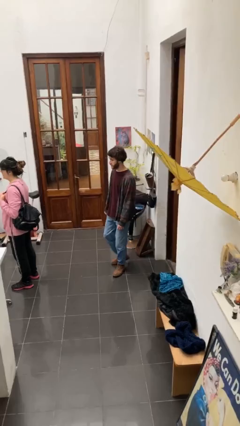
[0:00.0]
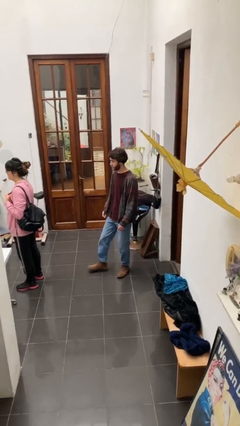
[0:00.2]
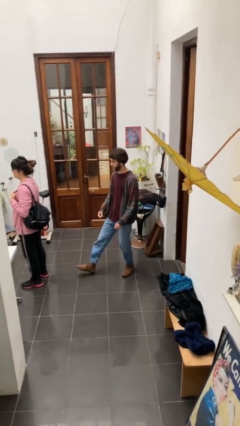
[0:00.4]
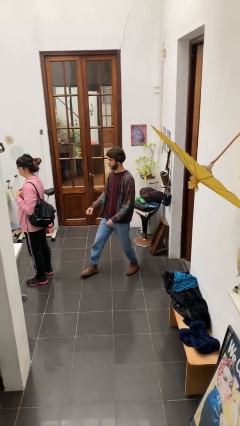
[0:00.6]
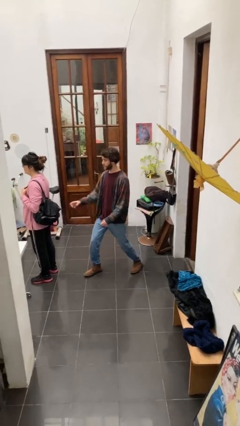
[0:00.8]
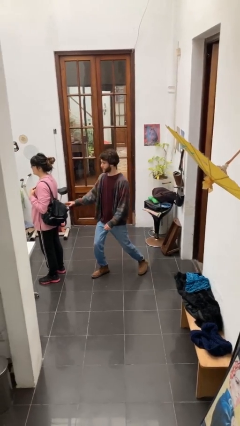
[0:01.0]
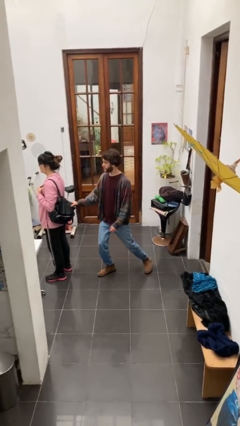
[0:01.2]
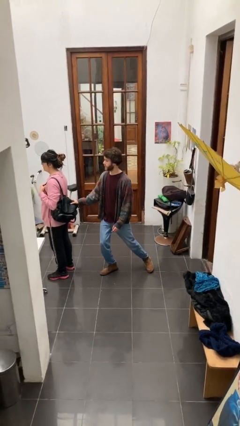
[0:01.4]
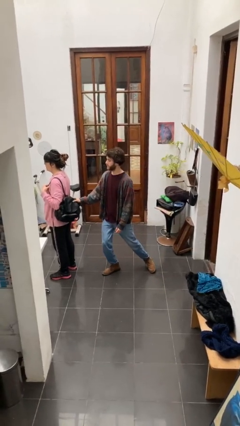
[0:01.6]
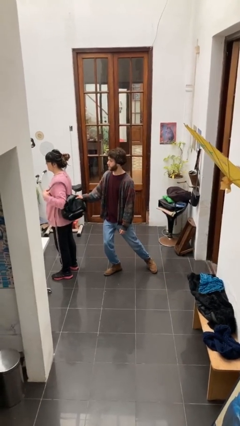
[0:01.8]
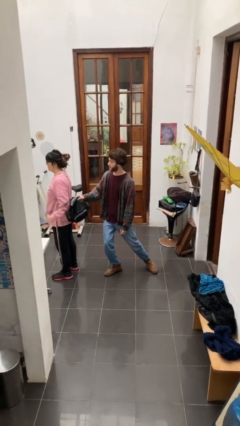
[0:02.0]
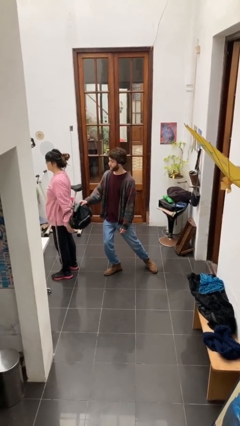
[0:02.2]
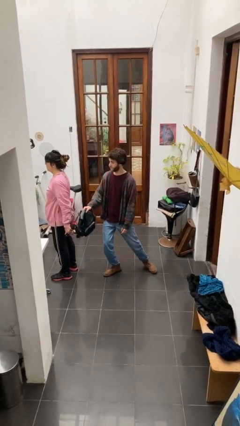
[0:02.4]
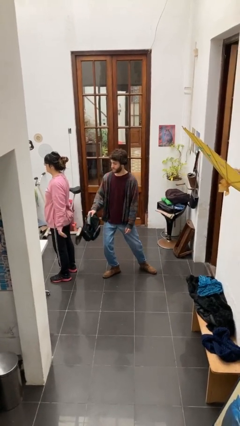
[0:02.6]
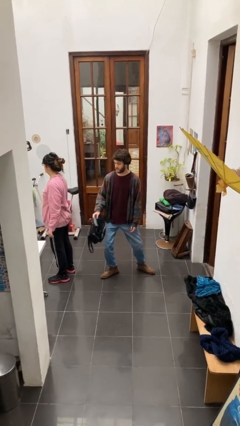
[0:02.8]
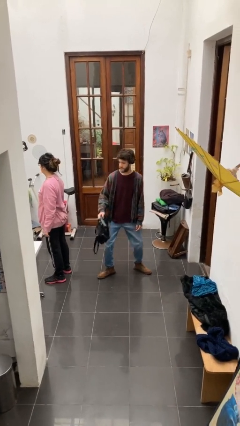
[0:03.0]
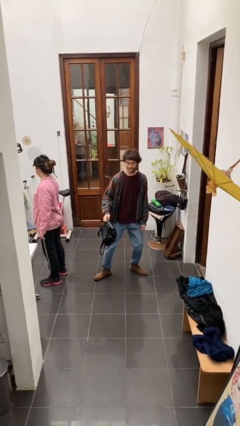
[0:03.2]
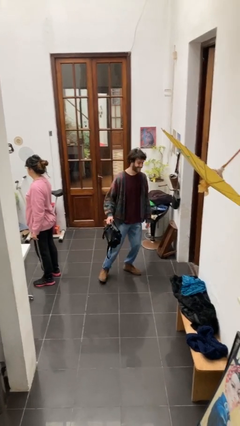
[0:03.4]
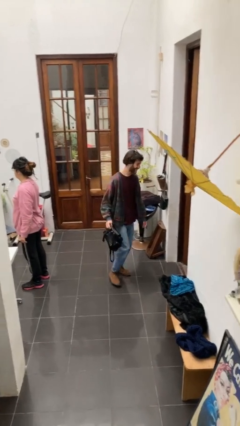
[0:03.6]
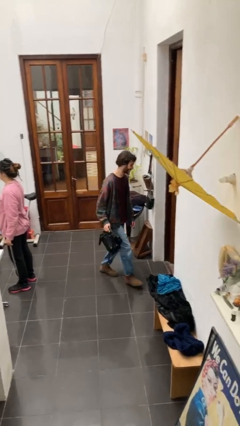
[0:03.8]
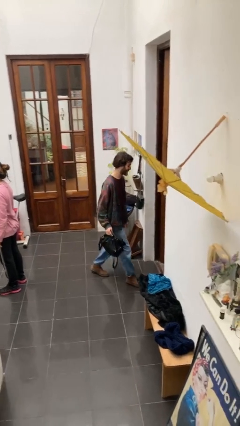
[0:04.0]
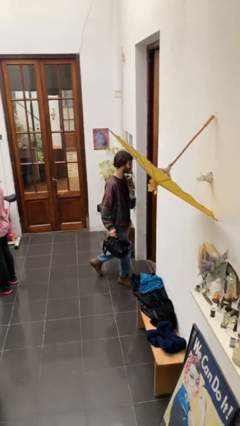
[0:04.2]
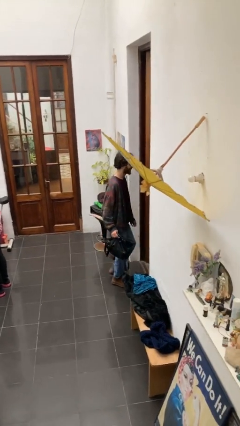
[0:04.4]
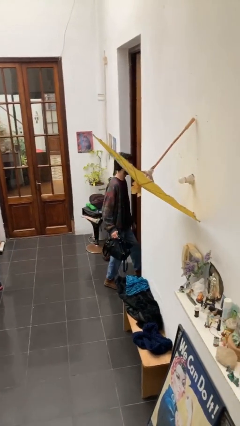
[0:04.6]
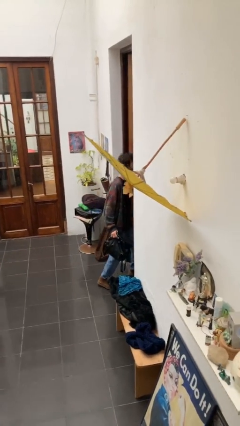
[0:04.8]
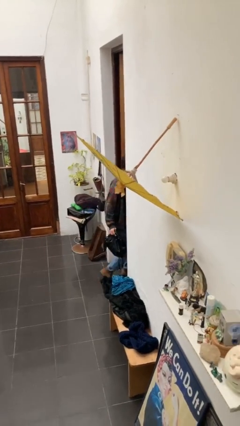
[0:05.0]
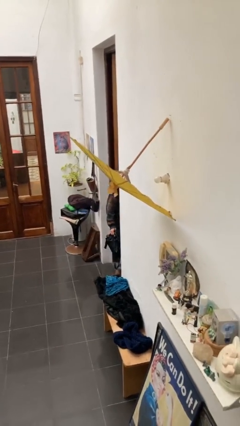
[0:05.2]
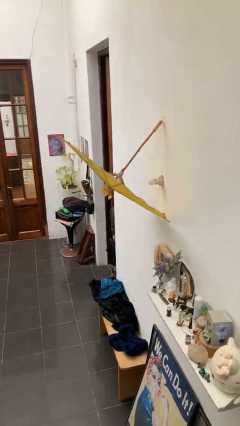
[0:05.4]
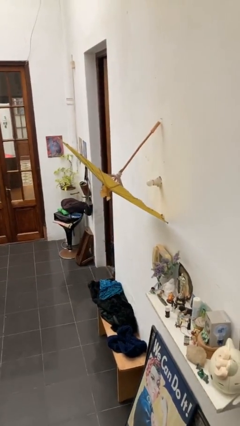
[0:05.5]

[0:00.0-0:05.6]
person steals object from person

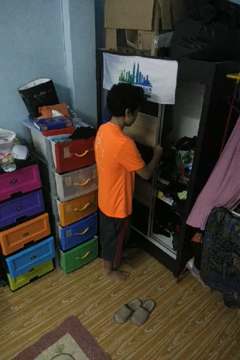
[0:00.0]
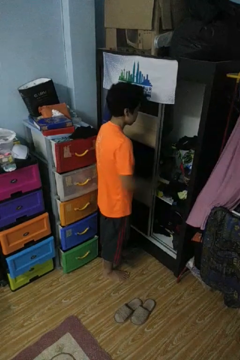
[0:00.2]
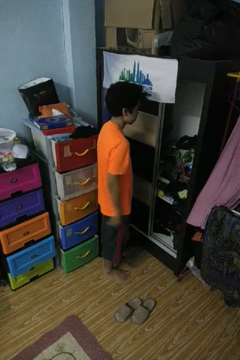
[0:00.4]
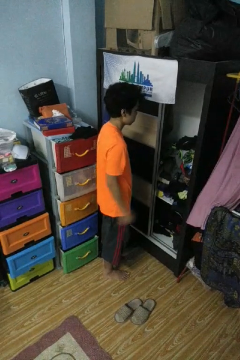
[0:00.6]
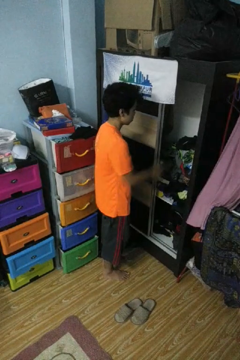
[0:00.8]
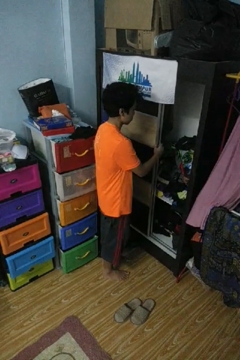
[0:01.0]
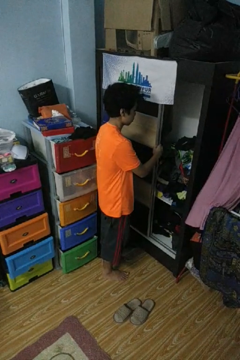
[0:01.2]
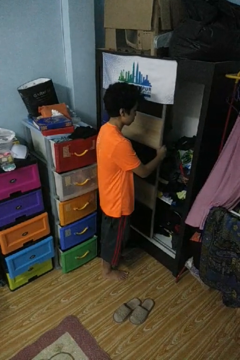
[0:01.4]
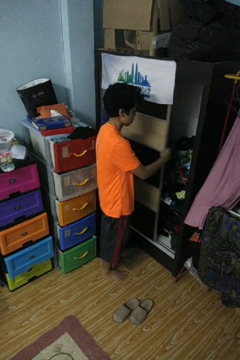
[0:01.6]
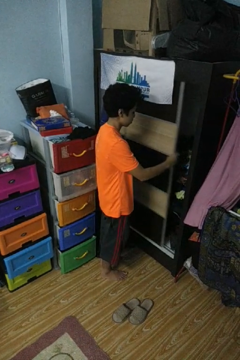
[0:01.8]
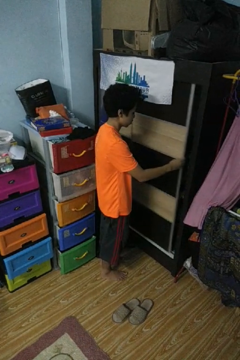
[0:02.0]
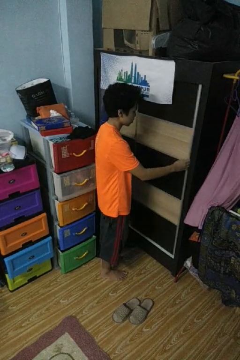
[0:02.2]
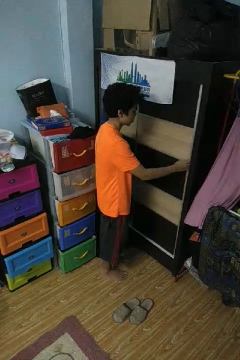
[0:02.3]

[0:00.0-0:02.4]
person closes closet door

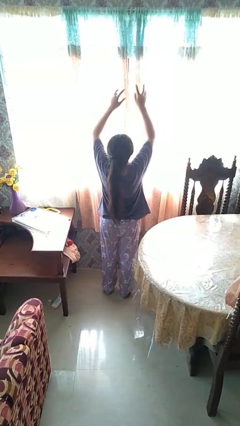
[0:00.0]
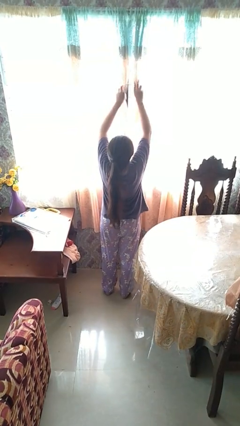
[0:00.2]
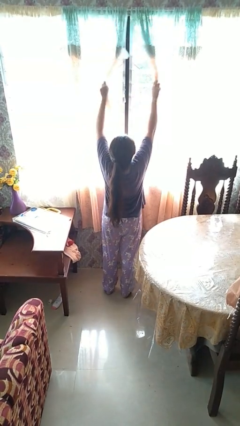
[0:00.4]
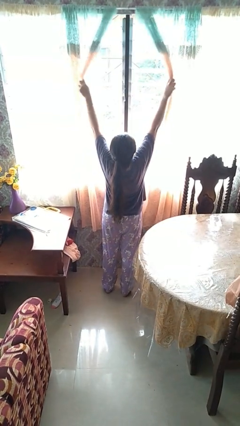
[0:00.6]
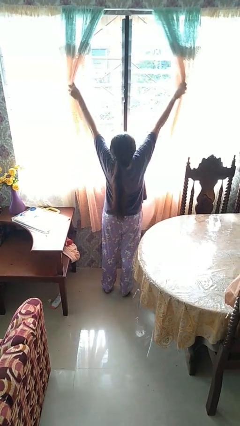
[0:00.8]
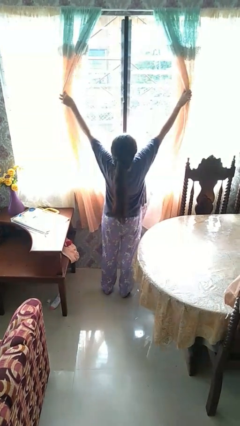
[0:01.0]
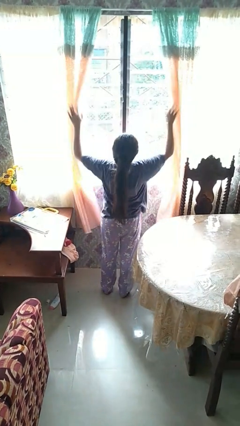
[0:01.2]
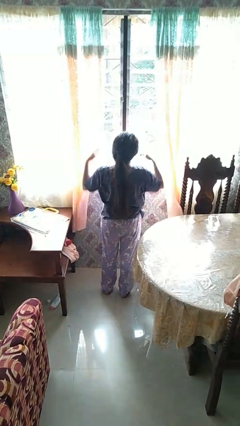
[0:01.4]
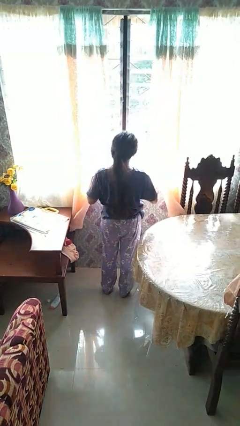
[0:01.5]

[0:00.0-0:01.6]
person opens curtains

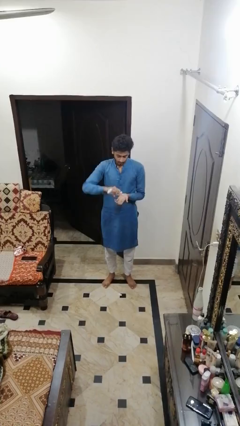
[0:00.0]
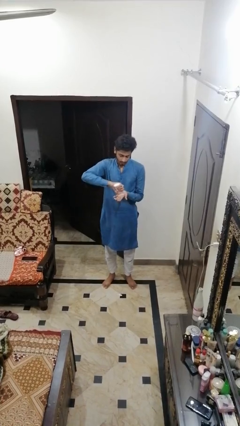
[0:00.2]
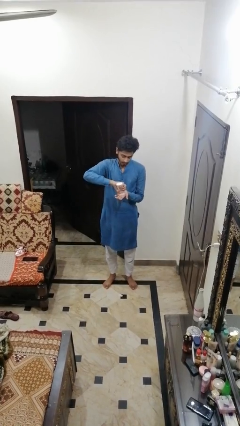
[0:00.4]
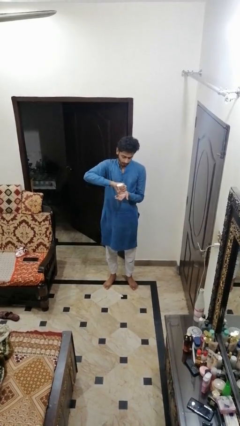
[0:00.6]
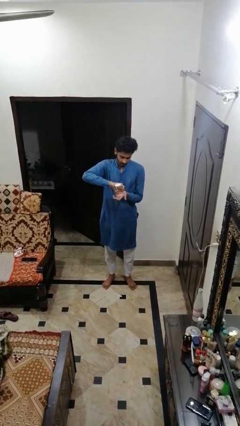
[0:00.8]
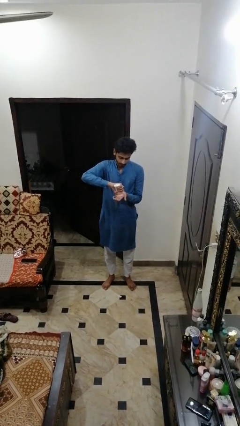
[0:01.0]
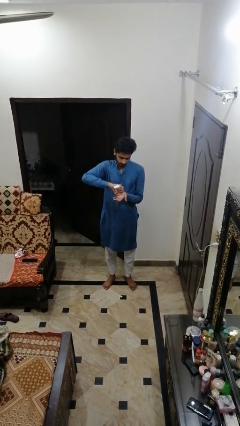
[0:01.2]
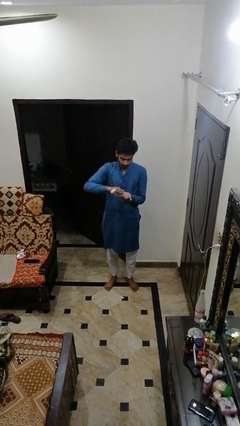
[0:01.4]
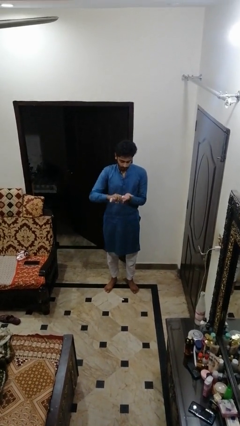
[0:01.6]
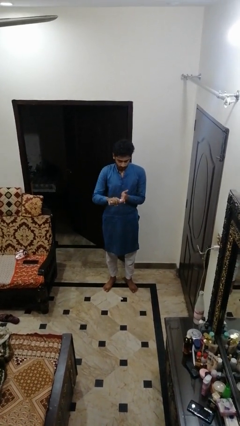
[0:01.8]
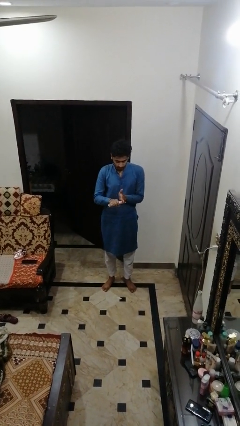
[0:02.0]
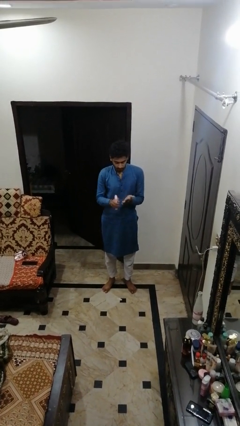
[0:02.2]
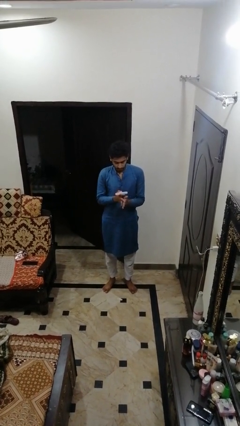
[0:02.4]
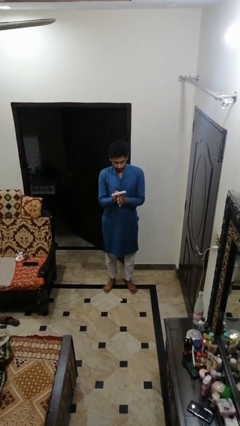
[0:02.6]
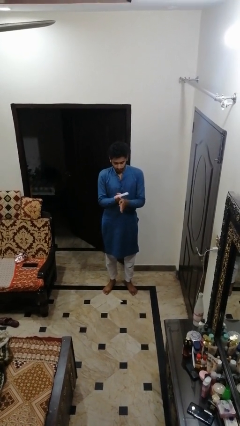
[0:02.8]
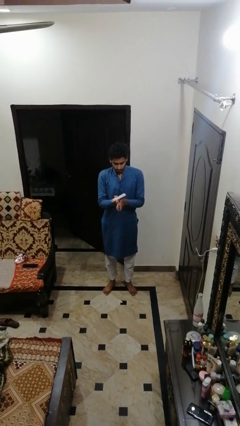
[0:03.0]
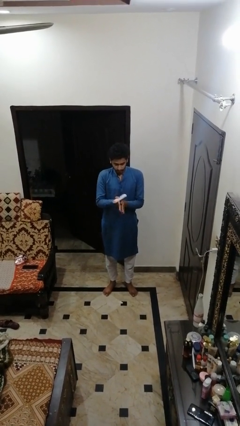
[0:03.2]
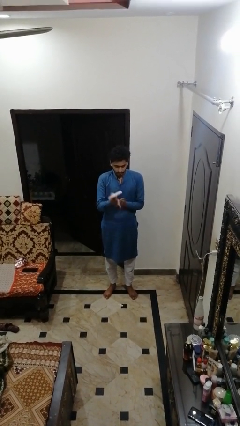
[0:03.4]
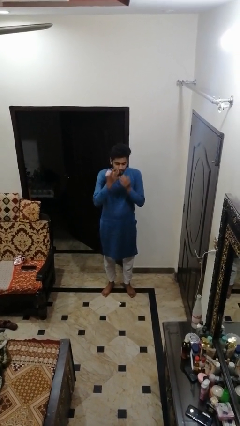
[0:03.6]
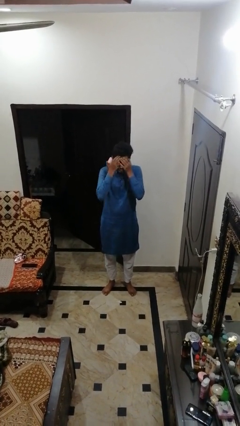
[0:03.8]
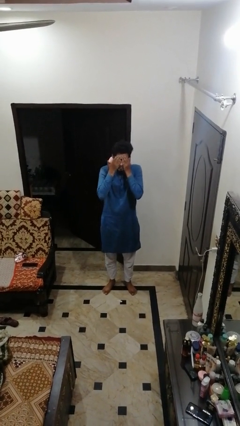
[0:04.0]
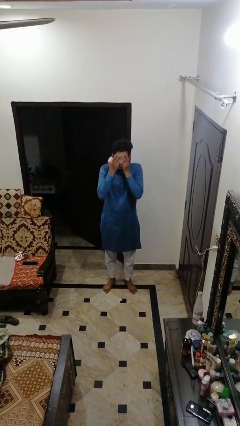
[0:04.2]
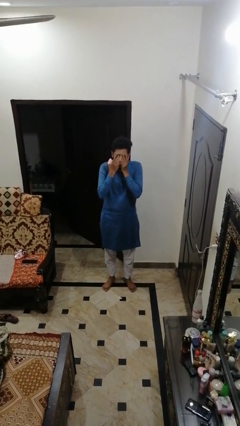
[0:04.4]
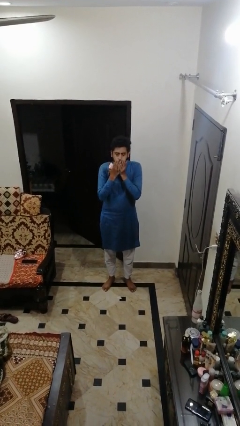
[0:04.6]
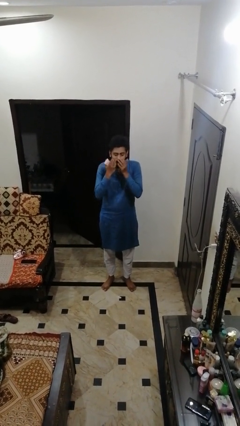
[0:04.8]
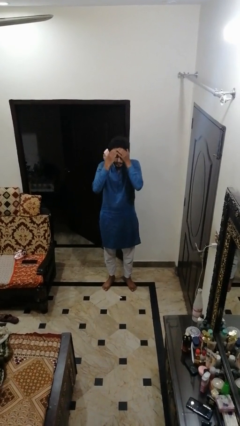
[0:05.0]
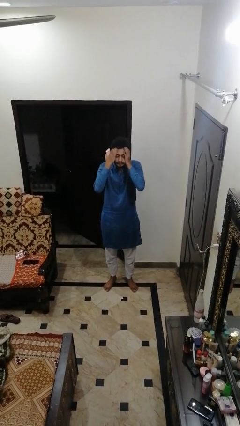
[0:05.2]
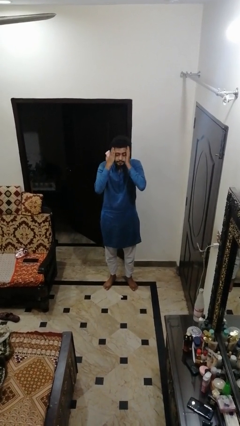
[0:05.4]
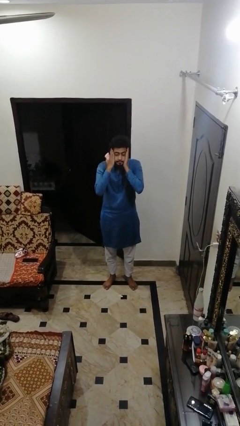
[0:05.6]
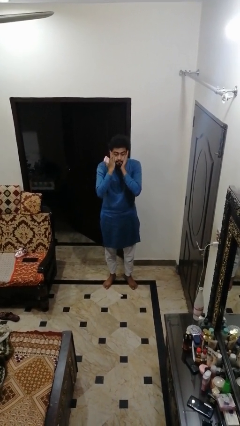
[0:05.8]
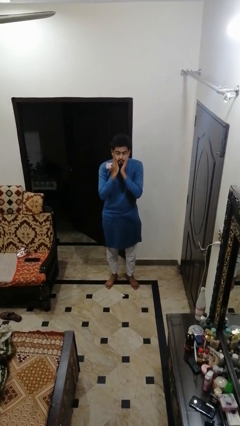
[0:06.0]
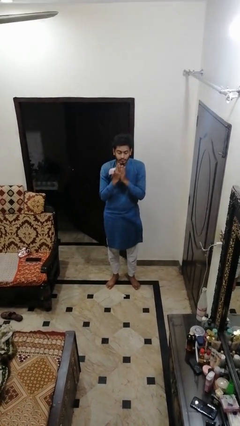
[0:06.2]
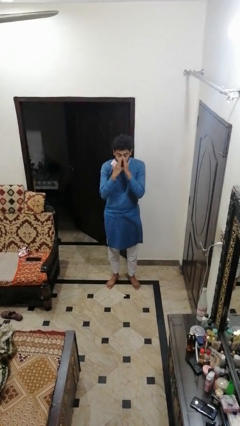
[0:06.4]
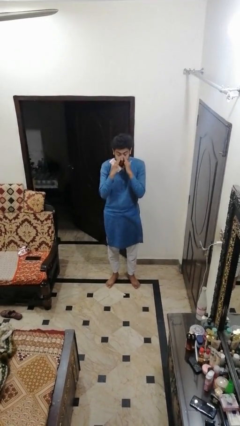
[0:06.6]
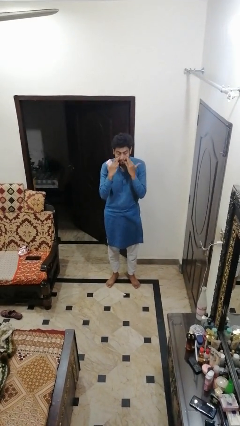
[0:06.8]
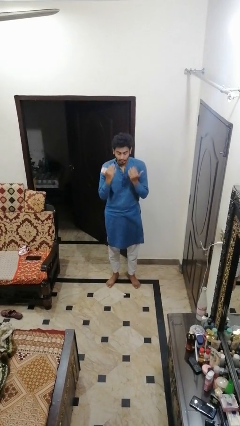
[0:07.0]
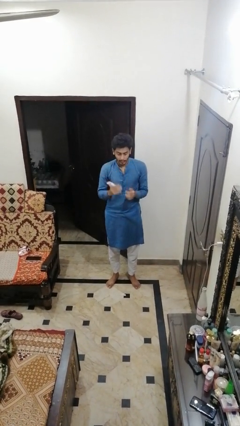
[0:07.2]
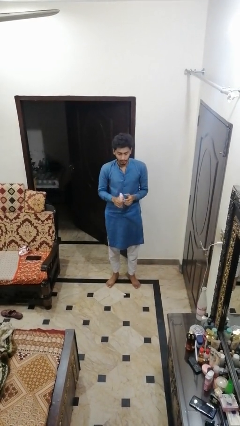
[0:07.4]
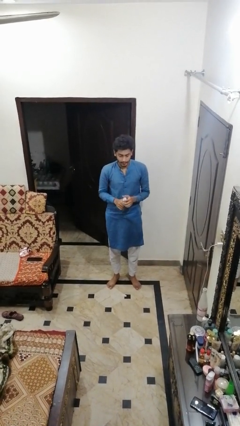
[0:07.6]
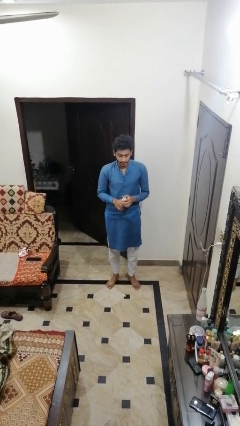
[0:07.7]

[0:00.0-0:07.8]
person applies facial moisturizer

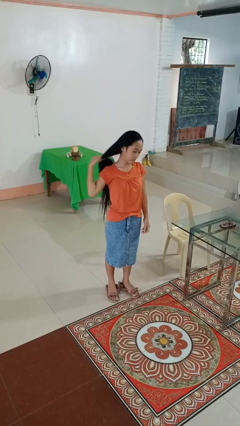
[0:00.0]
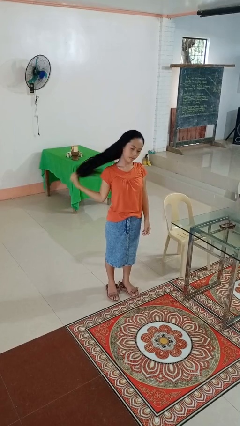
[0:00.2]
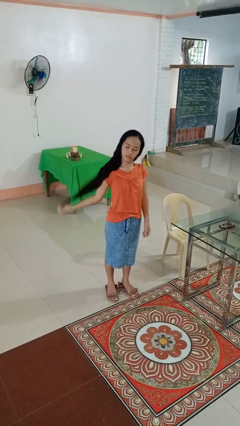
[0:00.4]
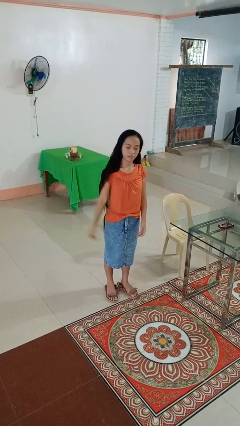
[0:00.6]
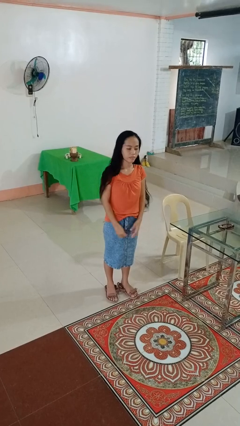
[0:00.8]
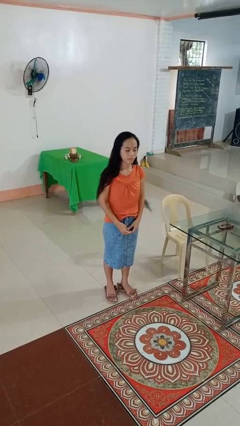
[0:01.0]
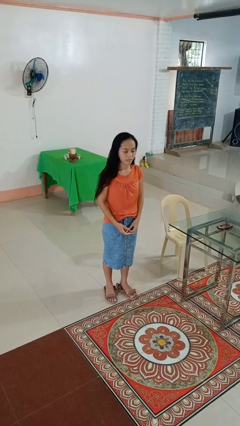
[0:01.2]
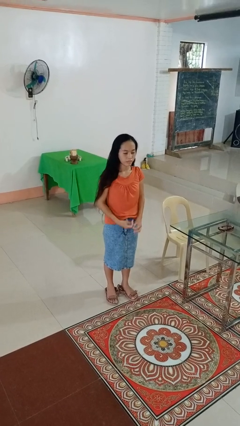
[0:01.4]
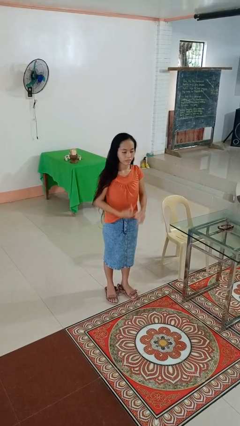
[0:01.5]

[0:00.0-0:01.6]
person takes off hairtie
